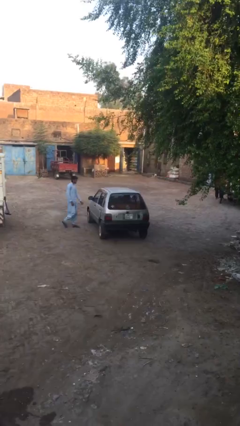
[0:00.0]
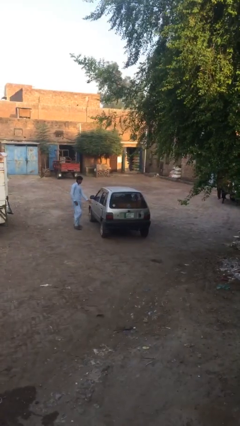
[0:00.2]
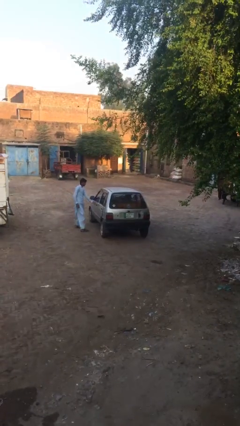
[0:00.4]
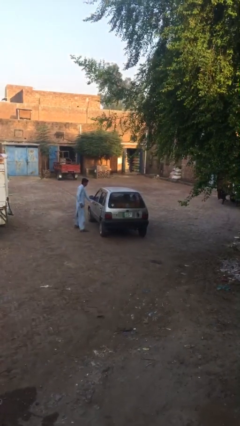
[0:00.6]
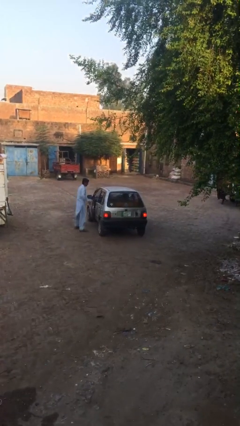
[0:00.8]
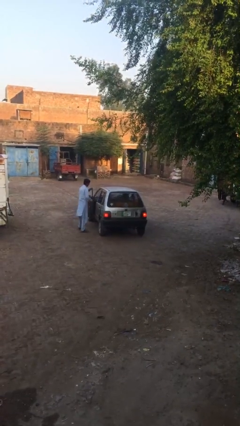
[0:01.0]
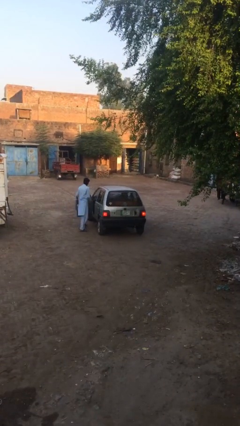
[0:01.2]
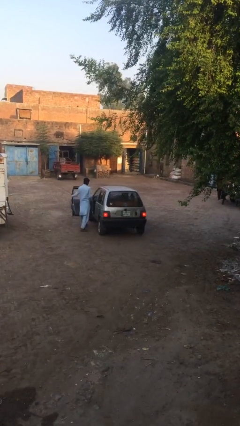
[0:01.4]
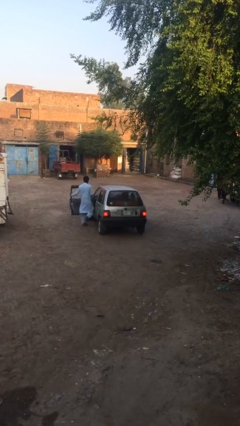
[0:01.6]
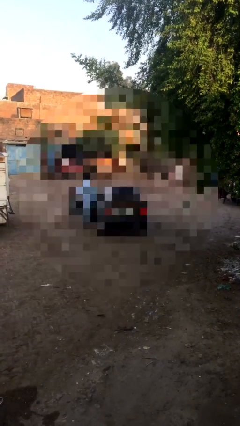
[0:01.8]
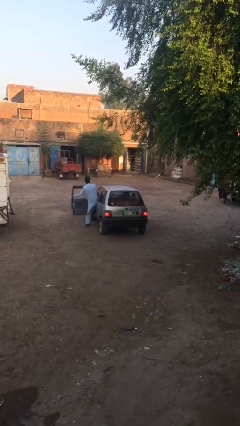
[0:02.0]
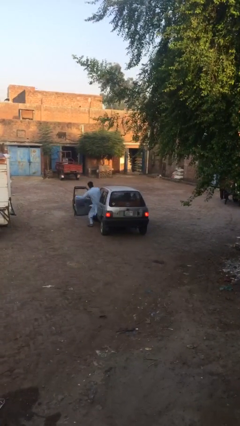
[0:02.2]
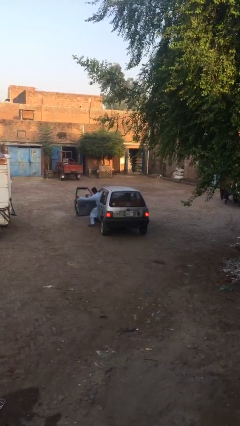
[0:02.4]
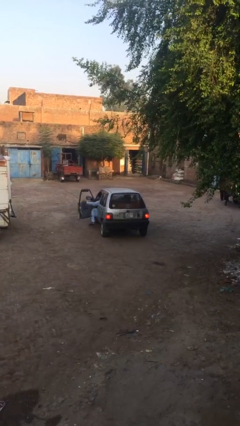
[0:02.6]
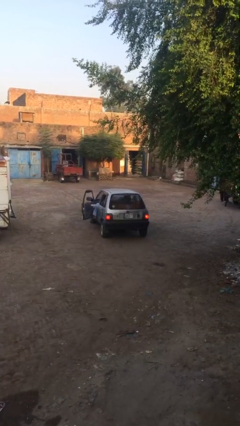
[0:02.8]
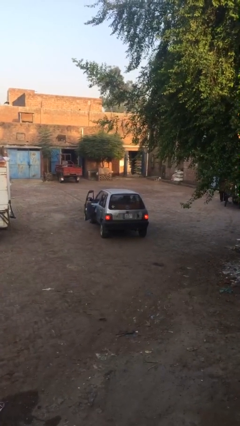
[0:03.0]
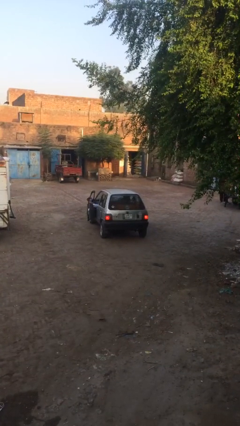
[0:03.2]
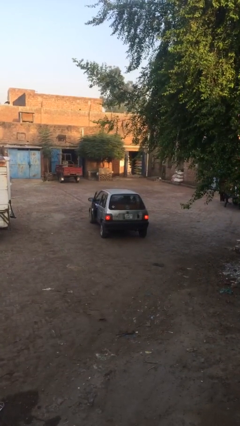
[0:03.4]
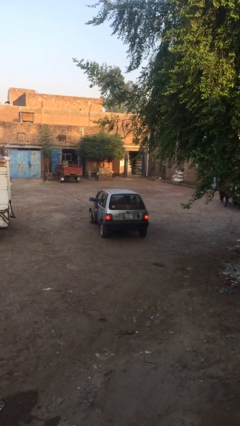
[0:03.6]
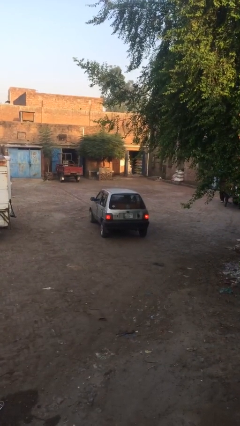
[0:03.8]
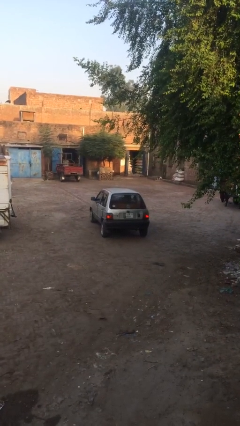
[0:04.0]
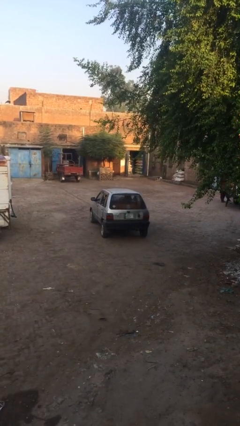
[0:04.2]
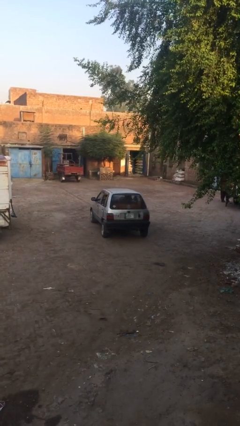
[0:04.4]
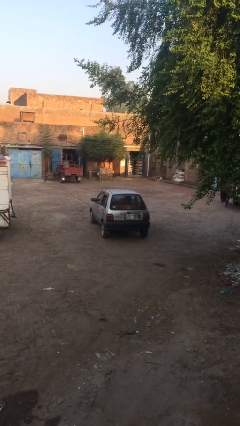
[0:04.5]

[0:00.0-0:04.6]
car picks up person

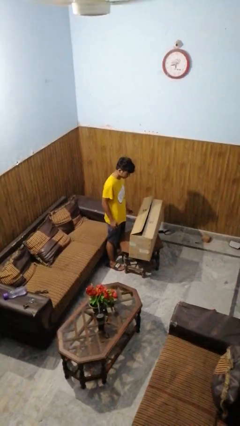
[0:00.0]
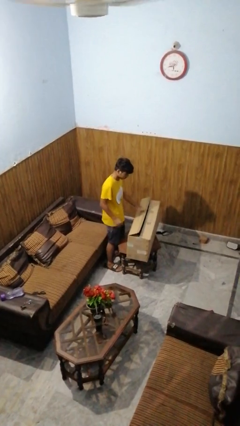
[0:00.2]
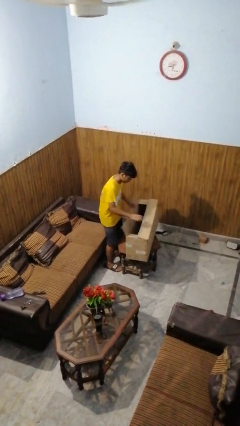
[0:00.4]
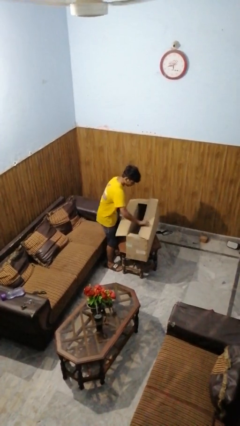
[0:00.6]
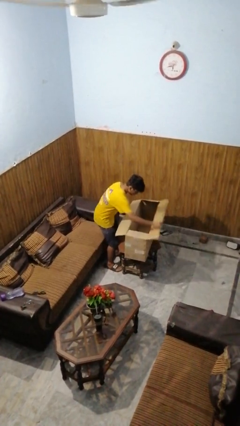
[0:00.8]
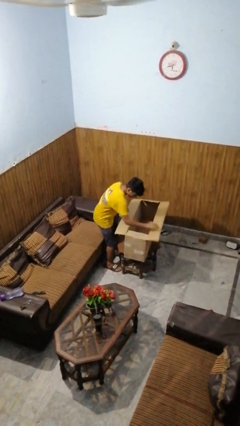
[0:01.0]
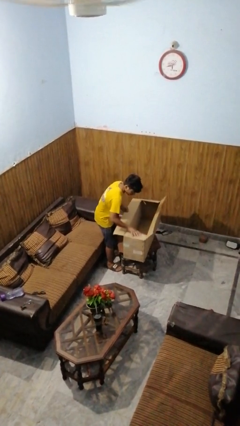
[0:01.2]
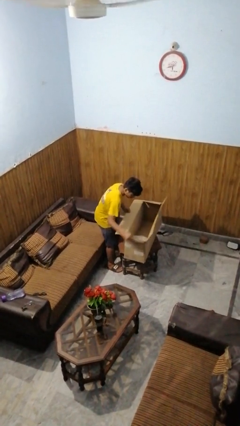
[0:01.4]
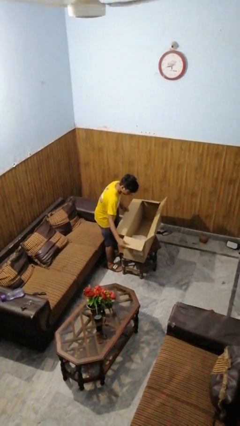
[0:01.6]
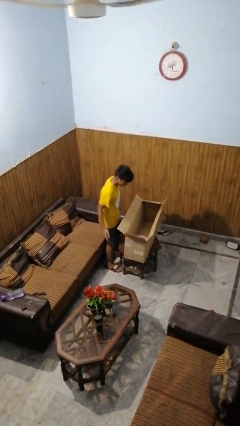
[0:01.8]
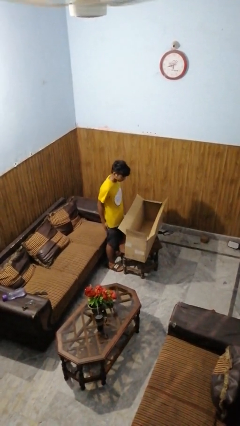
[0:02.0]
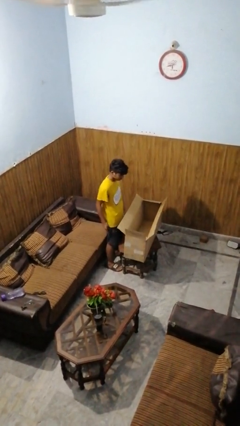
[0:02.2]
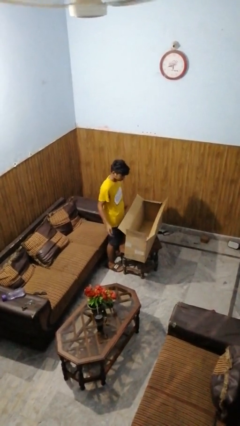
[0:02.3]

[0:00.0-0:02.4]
person opens box

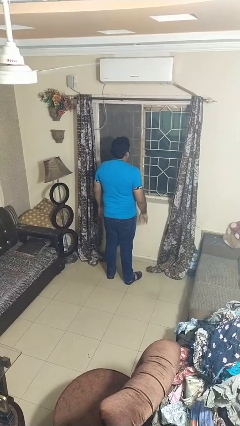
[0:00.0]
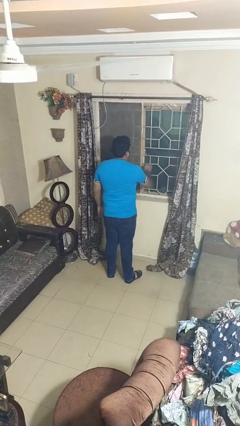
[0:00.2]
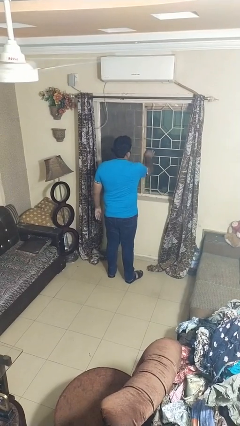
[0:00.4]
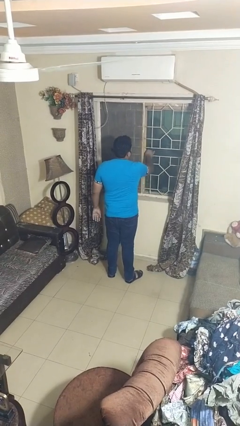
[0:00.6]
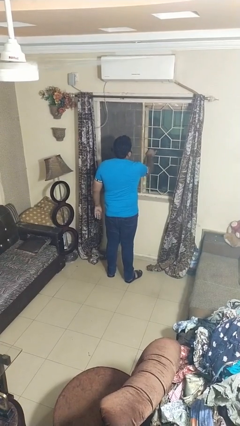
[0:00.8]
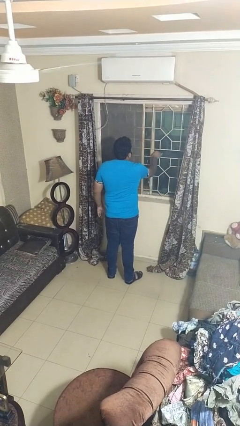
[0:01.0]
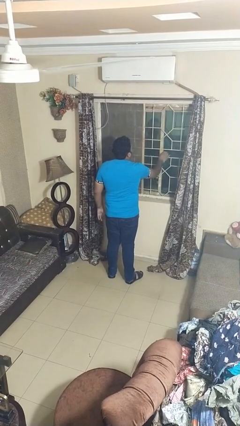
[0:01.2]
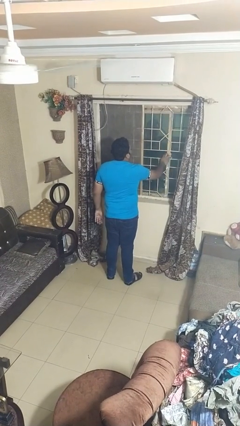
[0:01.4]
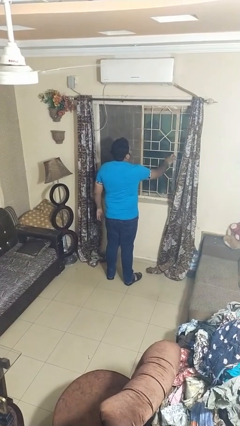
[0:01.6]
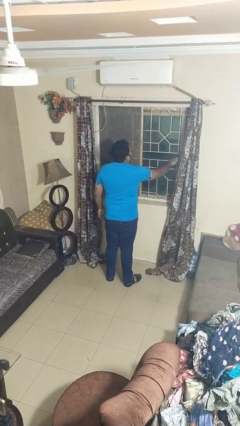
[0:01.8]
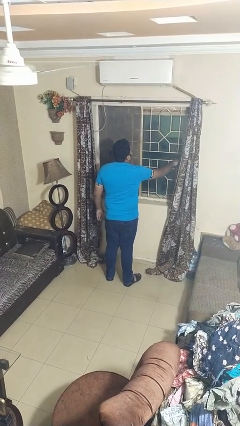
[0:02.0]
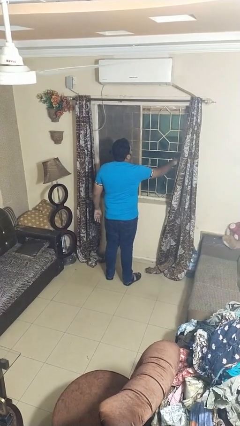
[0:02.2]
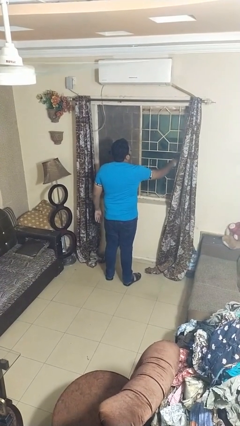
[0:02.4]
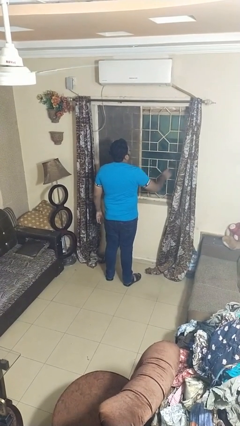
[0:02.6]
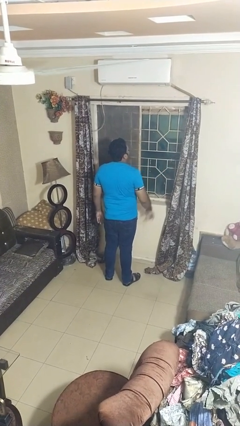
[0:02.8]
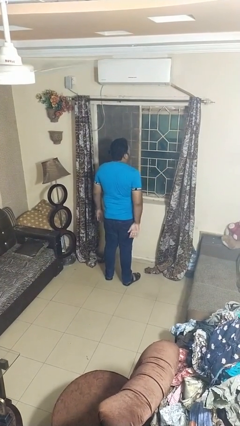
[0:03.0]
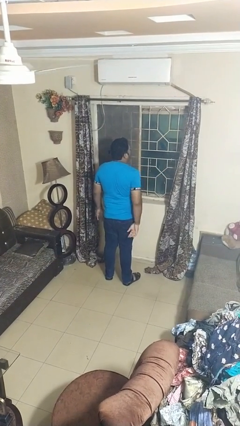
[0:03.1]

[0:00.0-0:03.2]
person opens home window

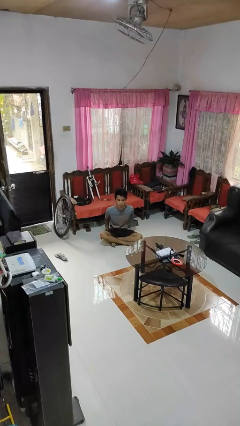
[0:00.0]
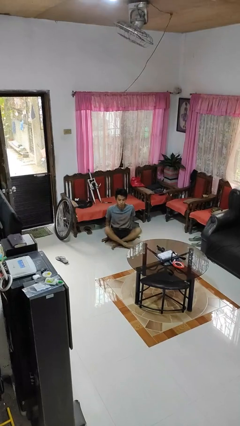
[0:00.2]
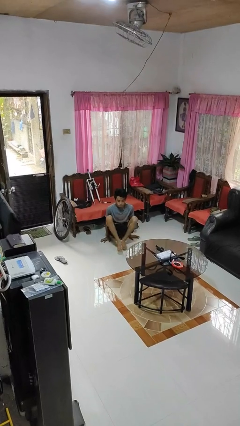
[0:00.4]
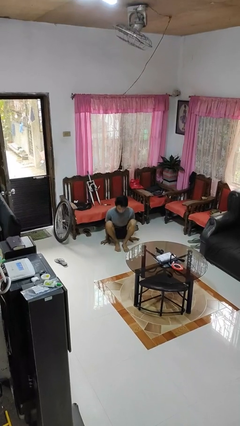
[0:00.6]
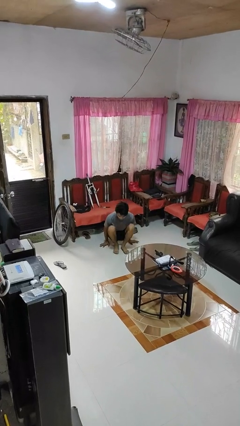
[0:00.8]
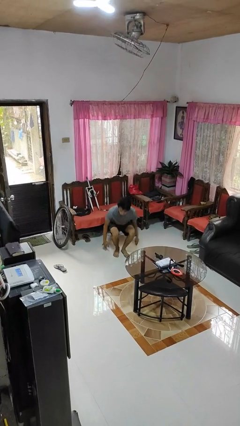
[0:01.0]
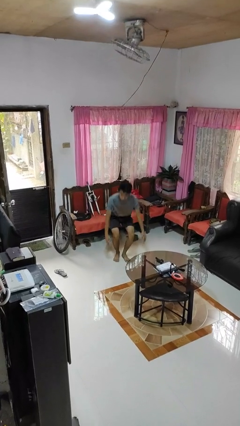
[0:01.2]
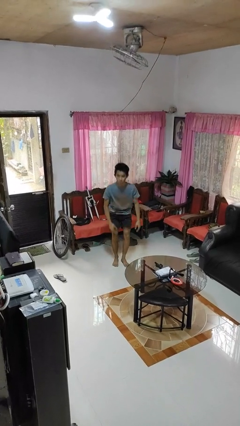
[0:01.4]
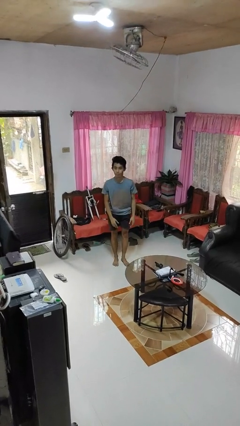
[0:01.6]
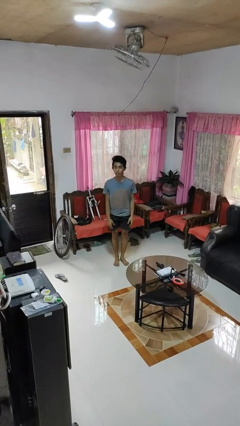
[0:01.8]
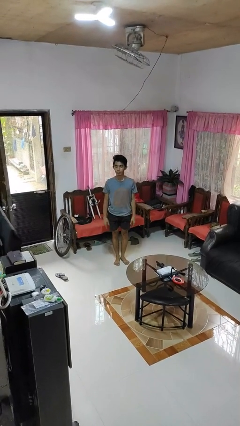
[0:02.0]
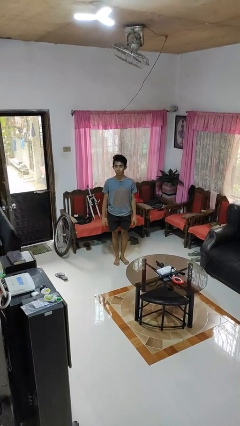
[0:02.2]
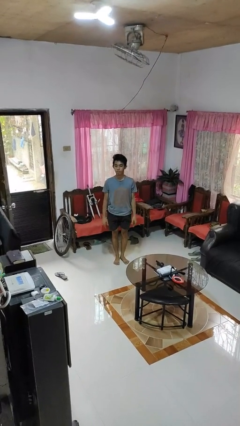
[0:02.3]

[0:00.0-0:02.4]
person stands up from floor

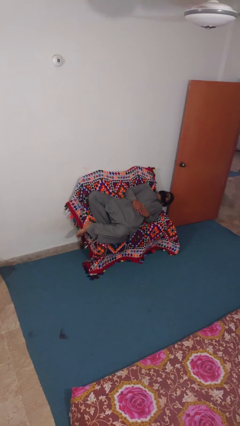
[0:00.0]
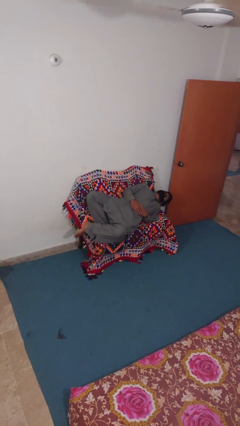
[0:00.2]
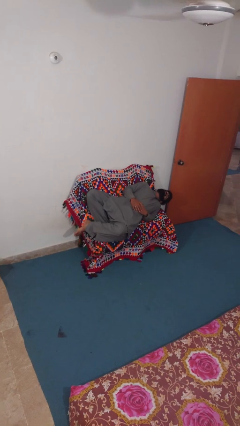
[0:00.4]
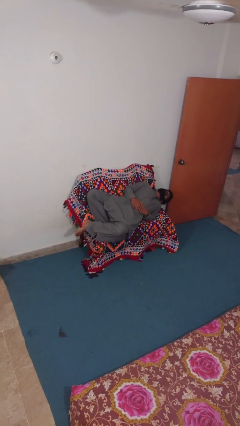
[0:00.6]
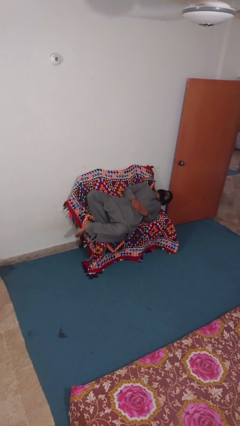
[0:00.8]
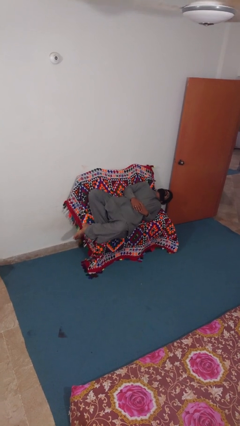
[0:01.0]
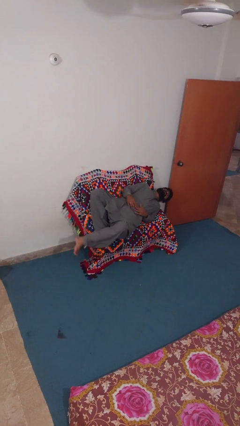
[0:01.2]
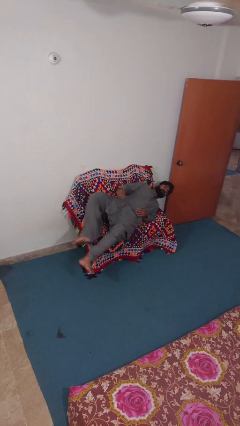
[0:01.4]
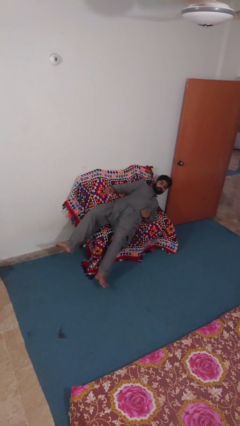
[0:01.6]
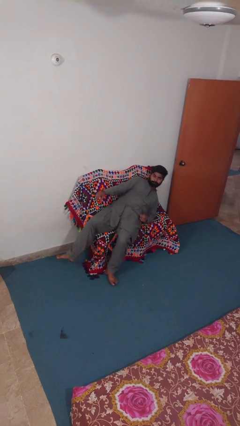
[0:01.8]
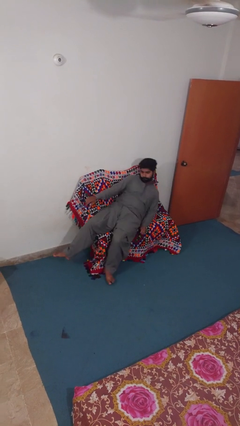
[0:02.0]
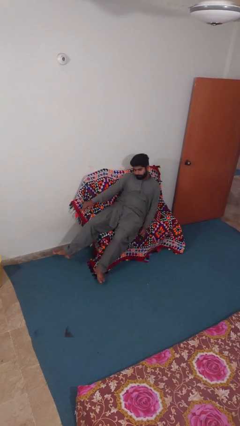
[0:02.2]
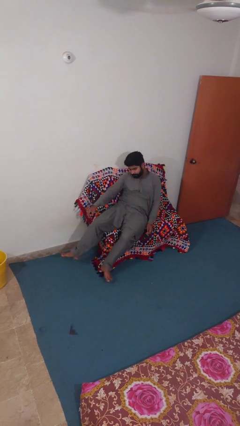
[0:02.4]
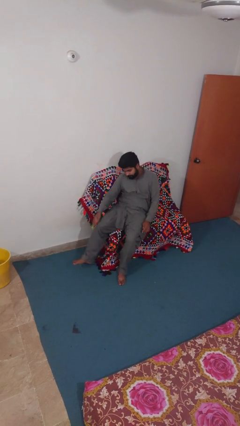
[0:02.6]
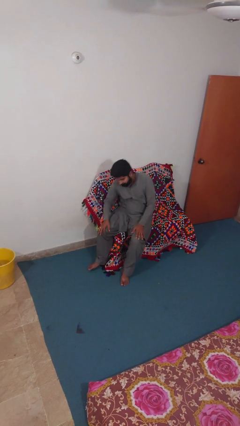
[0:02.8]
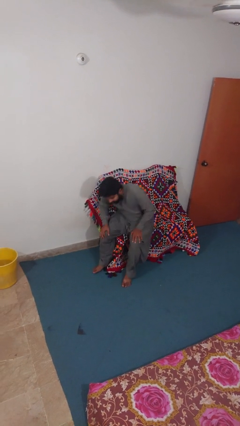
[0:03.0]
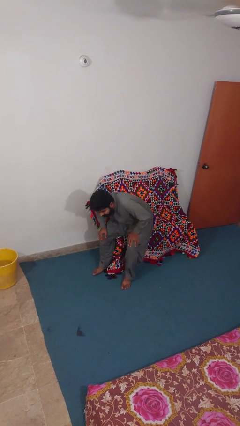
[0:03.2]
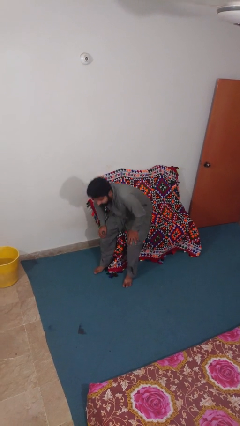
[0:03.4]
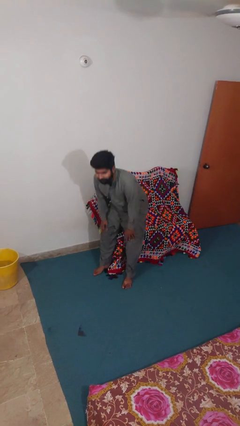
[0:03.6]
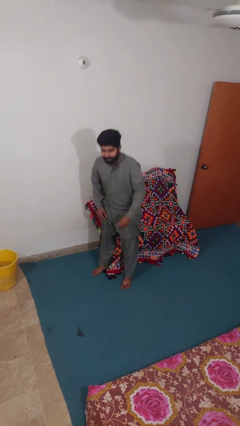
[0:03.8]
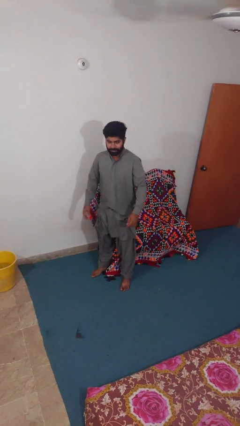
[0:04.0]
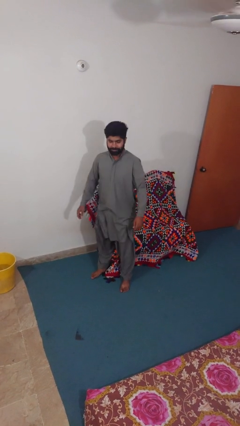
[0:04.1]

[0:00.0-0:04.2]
person stands up

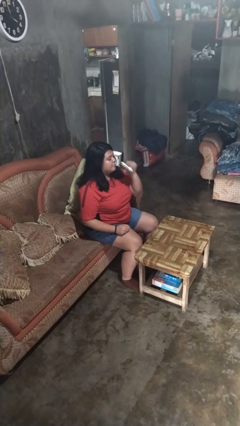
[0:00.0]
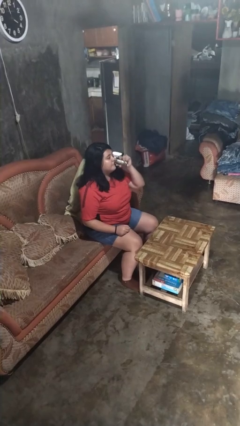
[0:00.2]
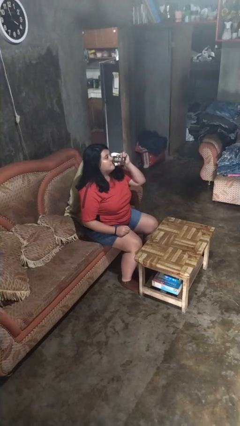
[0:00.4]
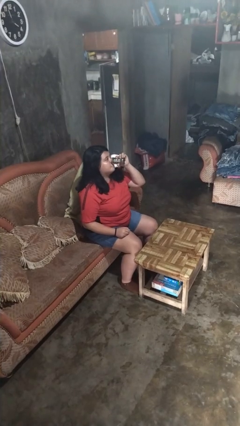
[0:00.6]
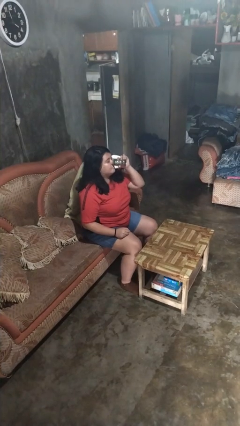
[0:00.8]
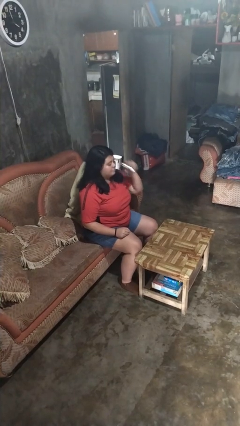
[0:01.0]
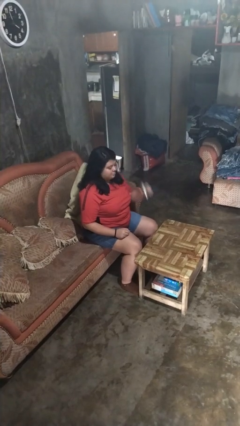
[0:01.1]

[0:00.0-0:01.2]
person drinks from beverage can
